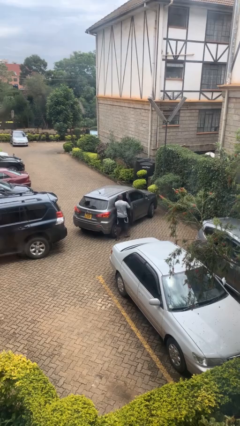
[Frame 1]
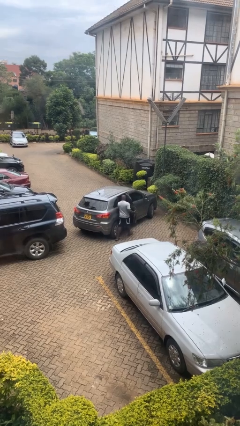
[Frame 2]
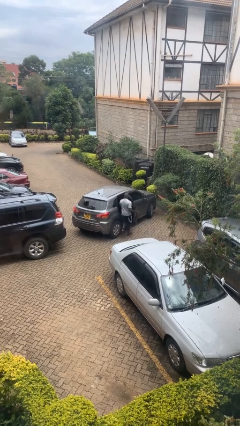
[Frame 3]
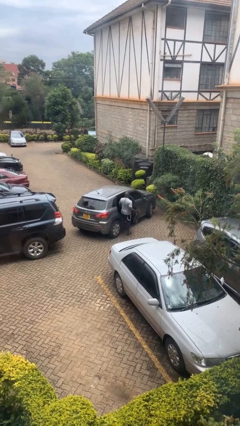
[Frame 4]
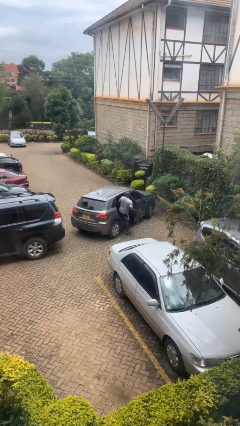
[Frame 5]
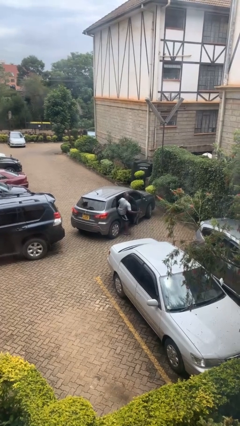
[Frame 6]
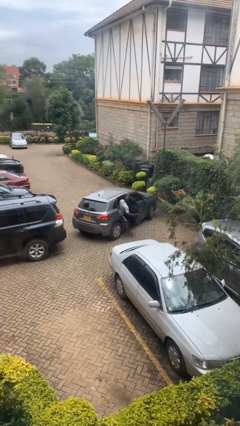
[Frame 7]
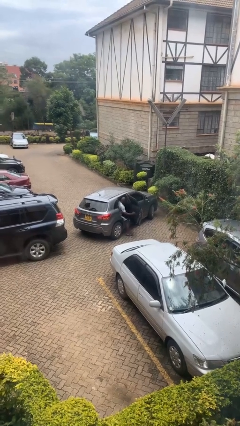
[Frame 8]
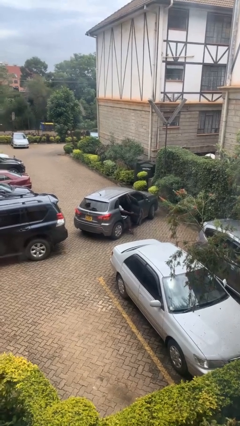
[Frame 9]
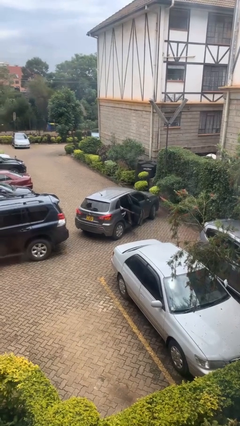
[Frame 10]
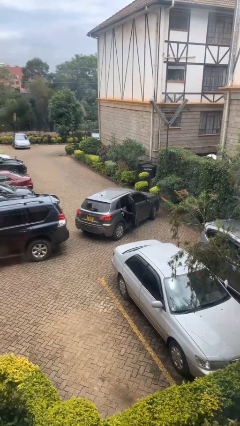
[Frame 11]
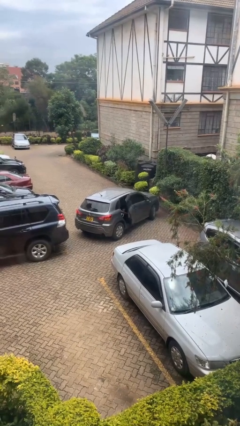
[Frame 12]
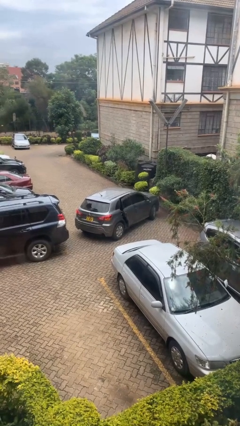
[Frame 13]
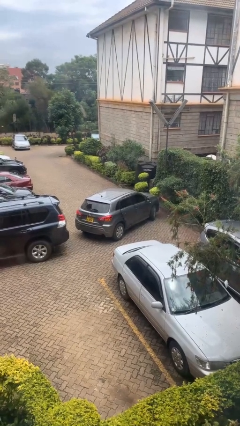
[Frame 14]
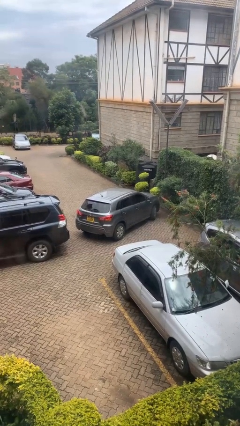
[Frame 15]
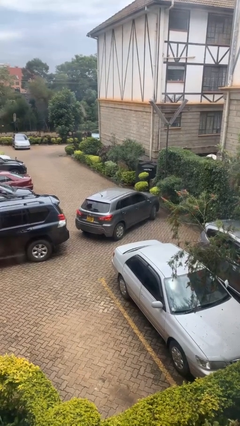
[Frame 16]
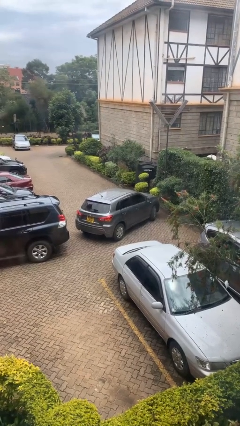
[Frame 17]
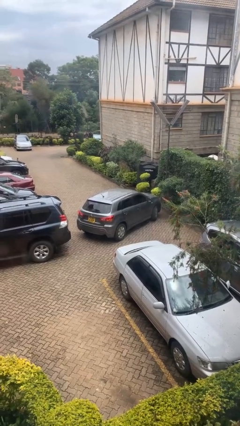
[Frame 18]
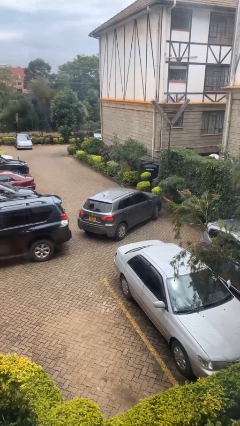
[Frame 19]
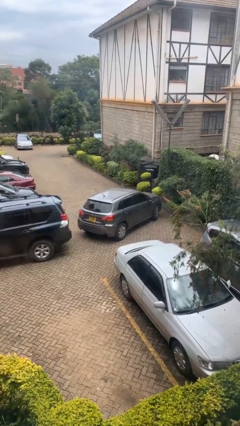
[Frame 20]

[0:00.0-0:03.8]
car picks up person

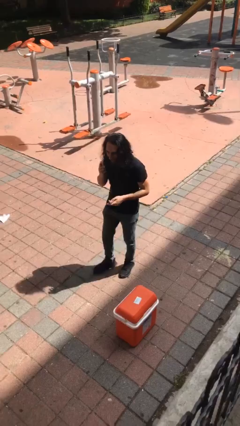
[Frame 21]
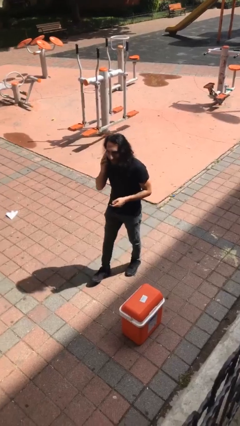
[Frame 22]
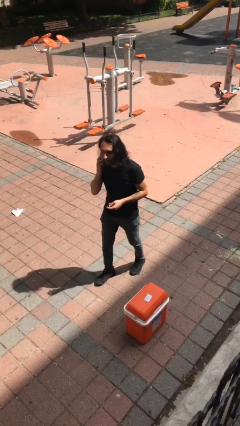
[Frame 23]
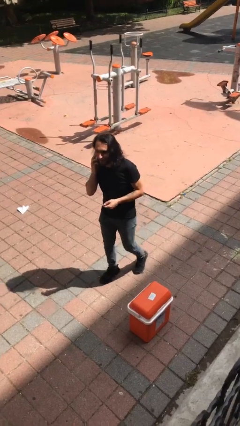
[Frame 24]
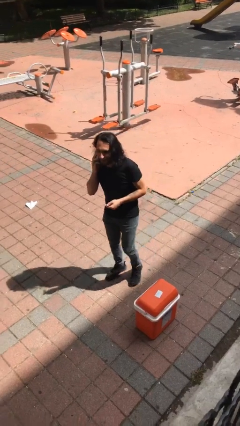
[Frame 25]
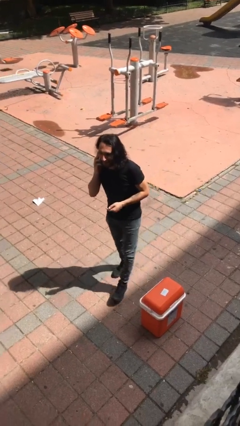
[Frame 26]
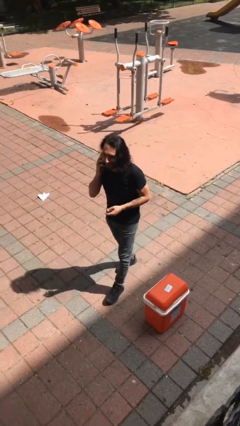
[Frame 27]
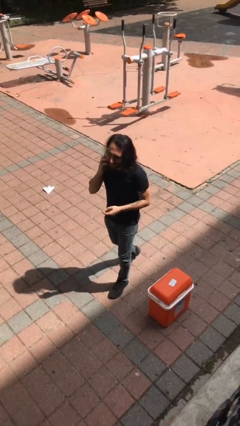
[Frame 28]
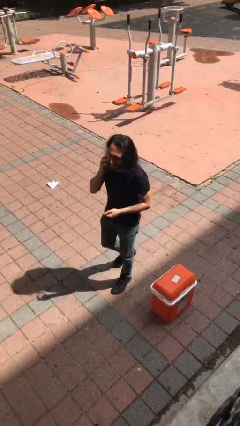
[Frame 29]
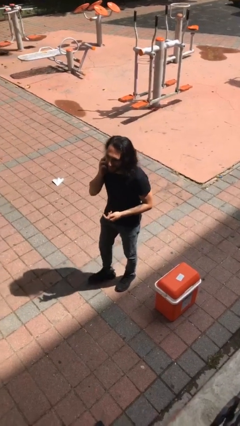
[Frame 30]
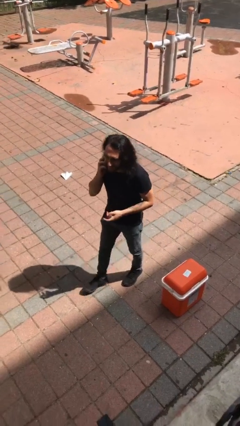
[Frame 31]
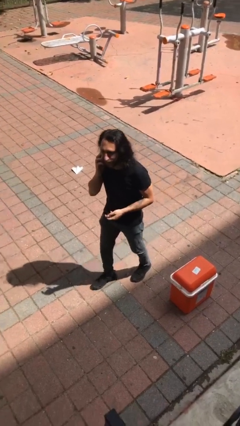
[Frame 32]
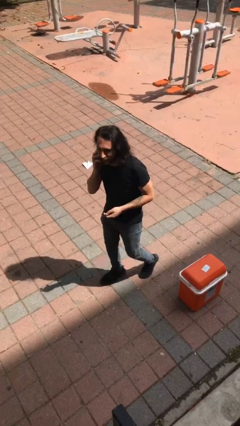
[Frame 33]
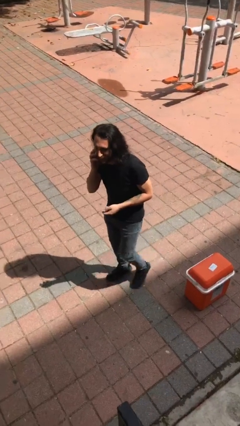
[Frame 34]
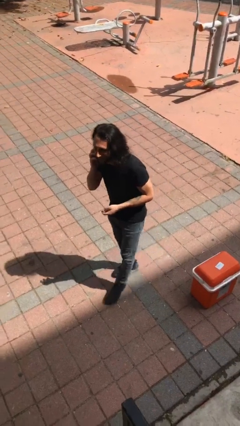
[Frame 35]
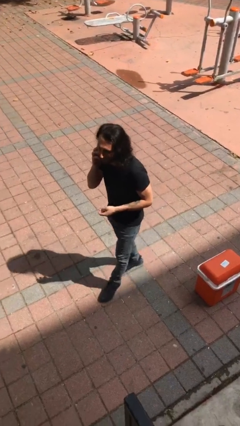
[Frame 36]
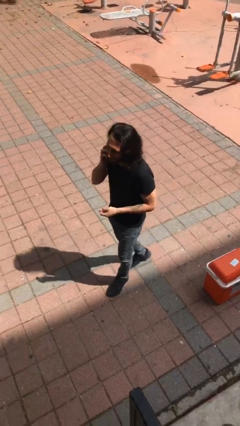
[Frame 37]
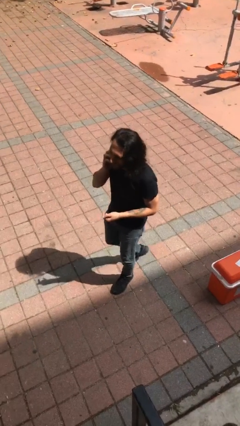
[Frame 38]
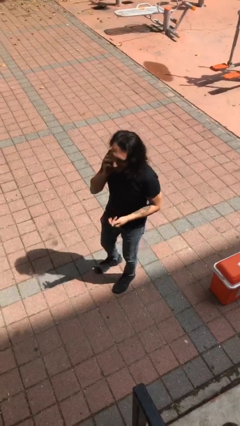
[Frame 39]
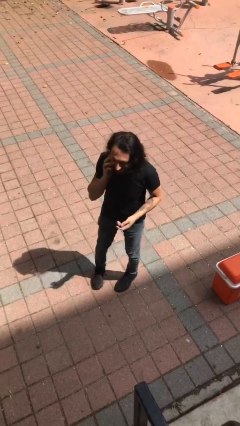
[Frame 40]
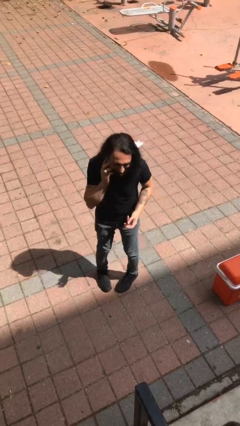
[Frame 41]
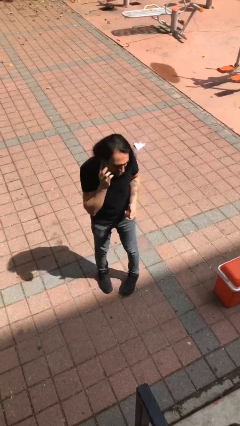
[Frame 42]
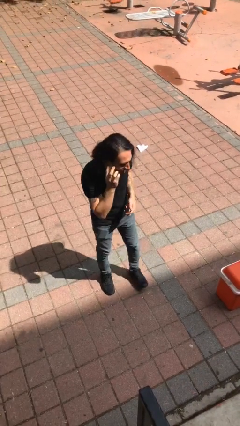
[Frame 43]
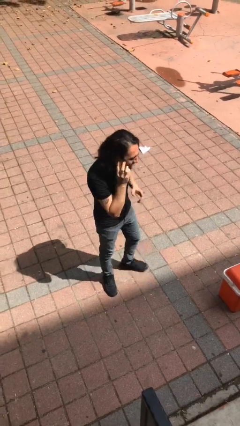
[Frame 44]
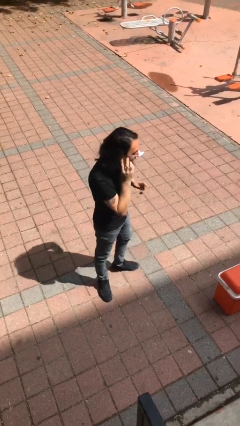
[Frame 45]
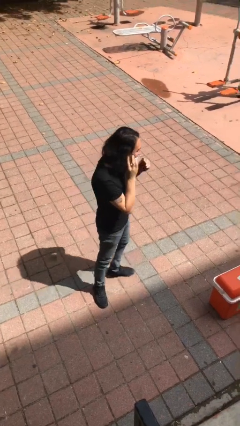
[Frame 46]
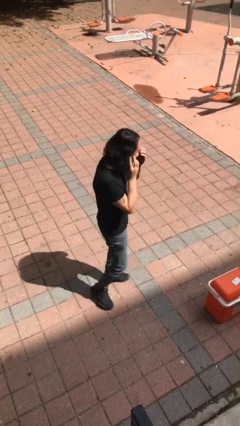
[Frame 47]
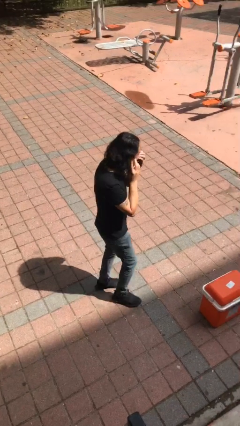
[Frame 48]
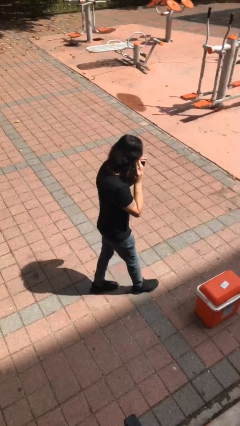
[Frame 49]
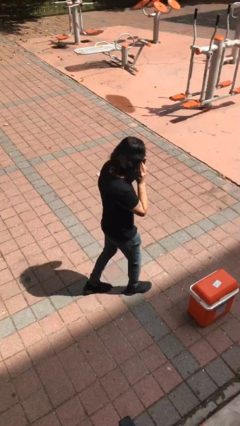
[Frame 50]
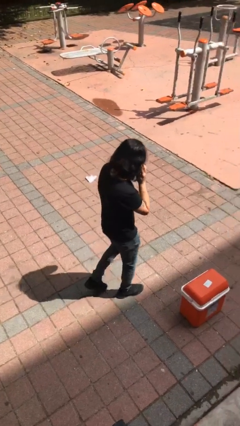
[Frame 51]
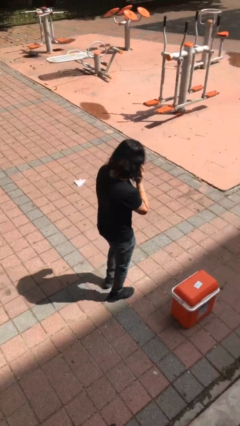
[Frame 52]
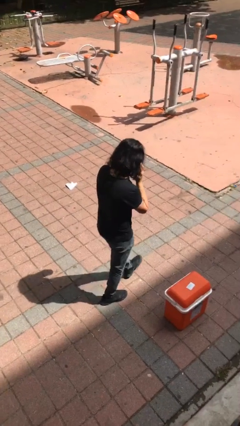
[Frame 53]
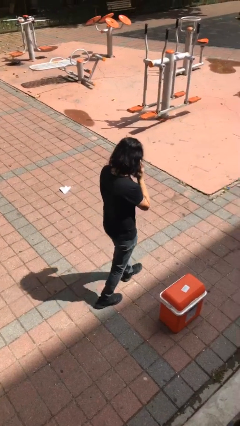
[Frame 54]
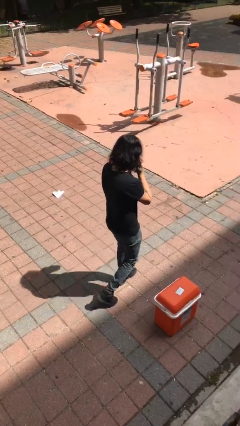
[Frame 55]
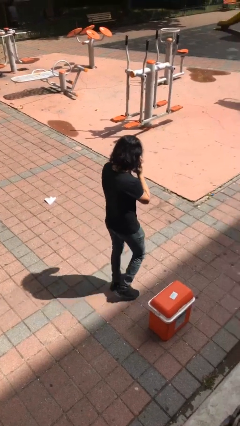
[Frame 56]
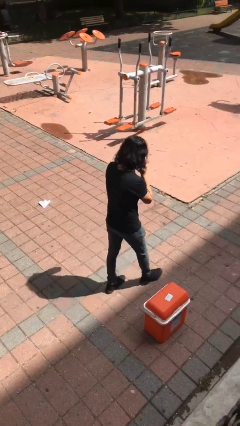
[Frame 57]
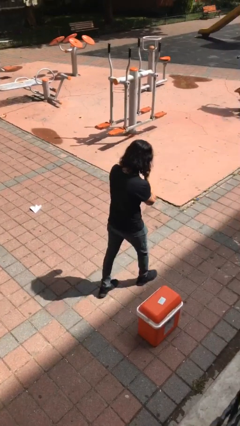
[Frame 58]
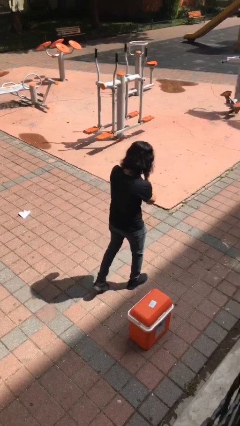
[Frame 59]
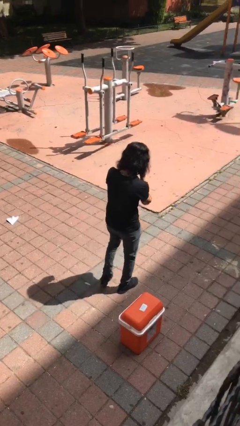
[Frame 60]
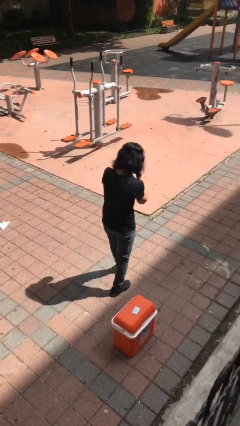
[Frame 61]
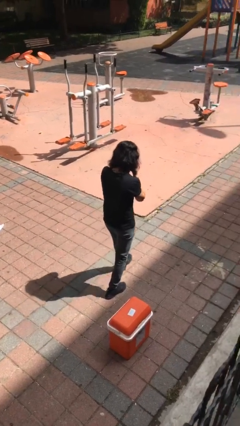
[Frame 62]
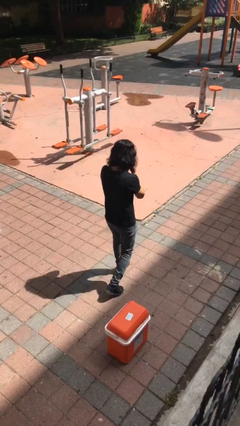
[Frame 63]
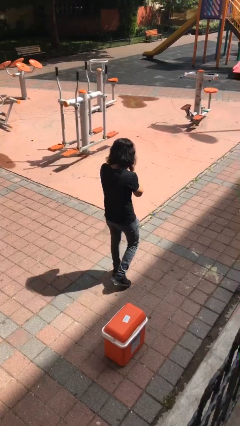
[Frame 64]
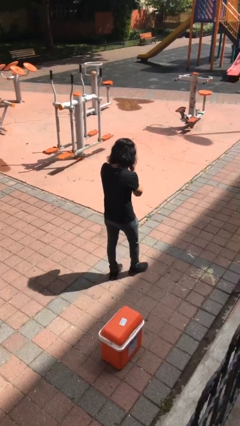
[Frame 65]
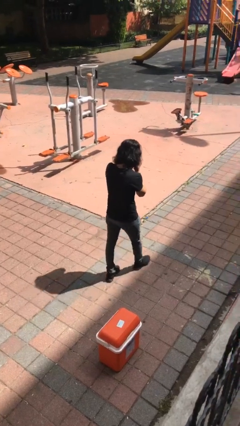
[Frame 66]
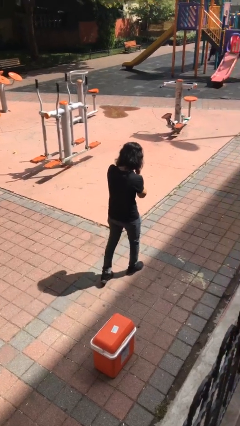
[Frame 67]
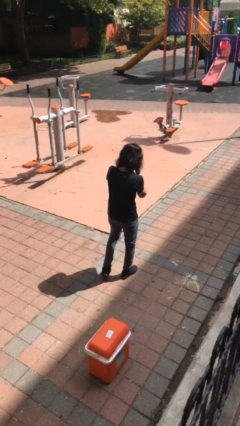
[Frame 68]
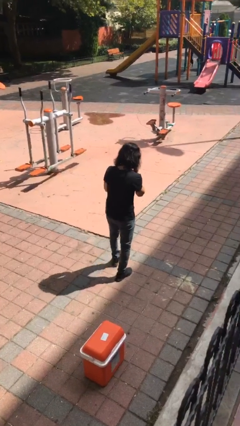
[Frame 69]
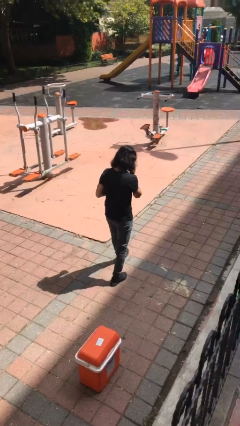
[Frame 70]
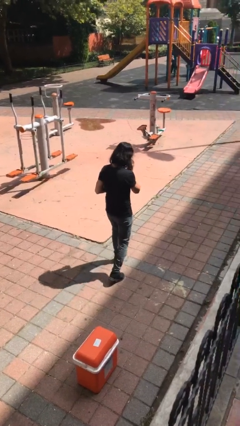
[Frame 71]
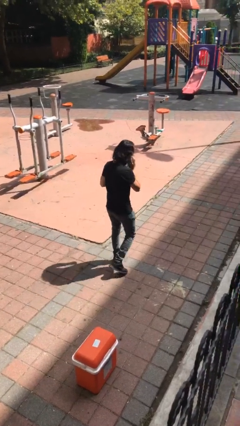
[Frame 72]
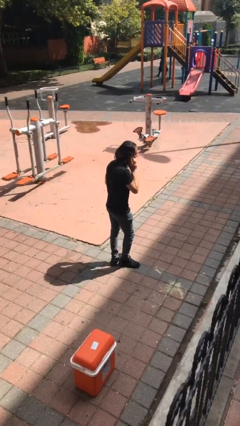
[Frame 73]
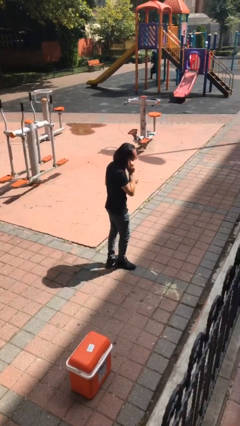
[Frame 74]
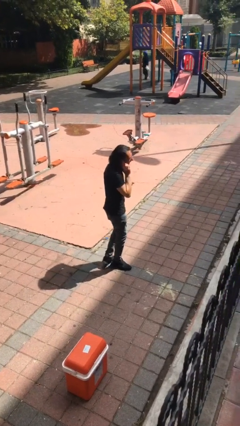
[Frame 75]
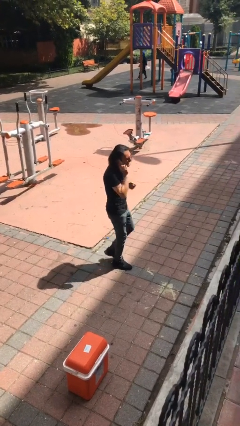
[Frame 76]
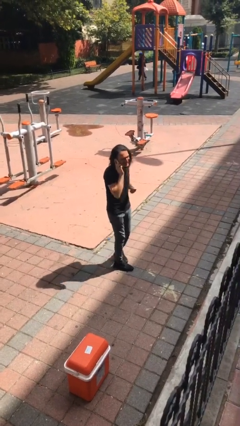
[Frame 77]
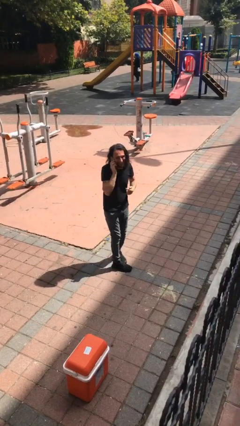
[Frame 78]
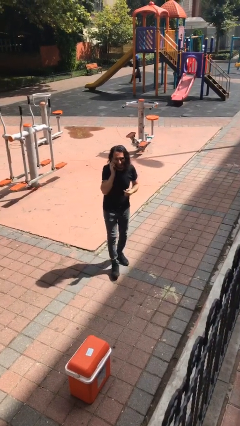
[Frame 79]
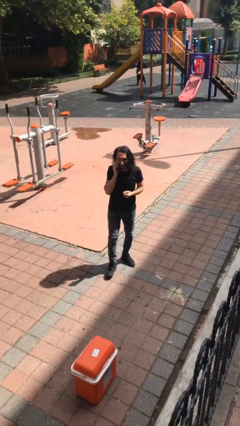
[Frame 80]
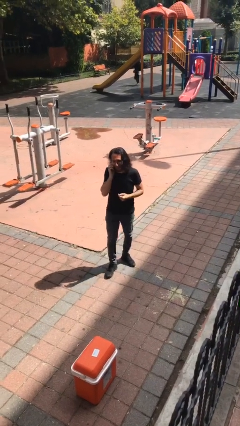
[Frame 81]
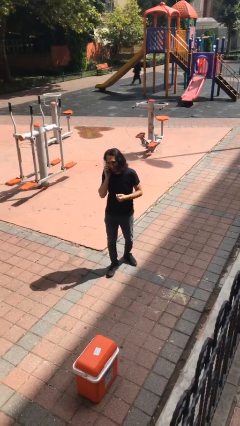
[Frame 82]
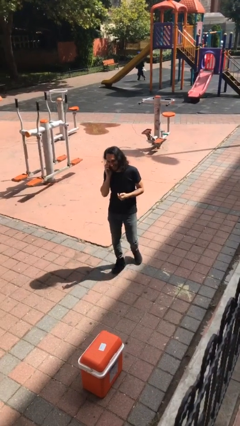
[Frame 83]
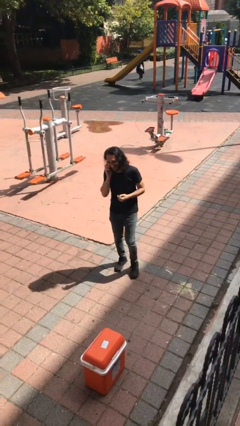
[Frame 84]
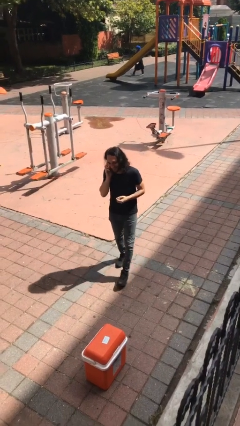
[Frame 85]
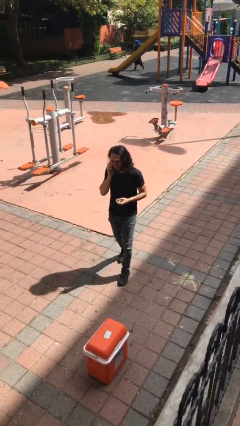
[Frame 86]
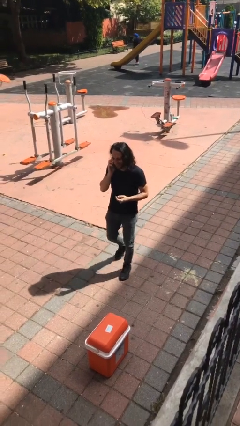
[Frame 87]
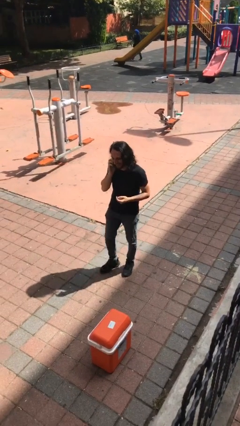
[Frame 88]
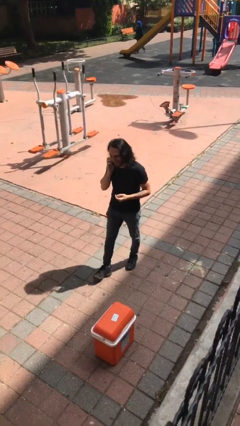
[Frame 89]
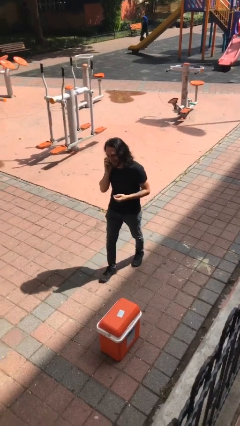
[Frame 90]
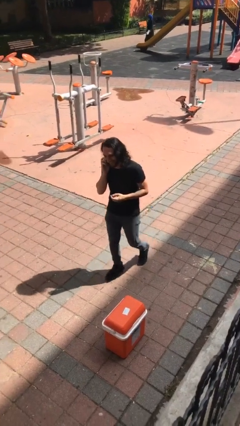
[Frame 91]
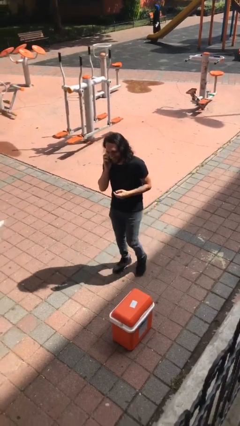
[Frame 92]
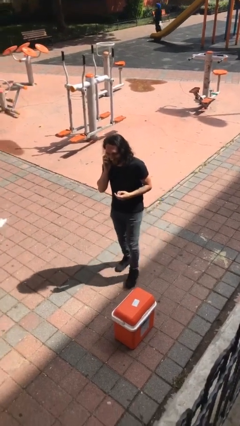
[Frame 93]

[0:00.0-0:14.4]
person talks on phone

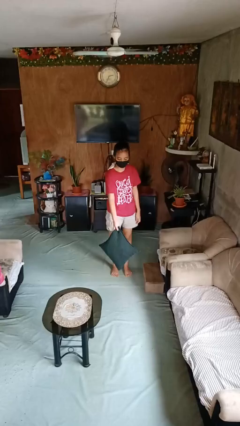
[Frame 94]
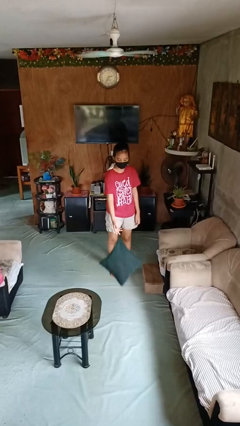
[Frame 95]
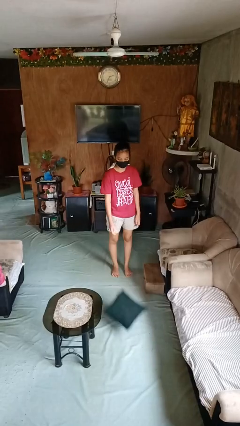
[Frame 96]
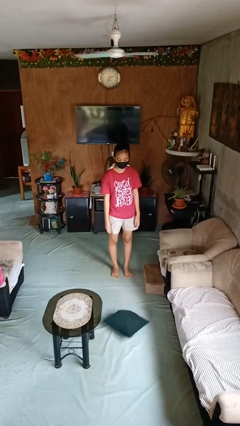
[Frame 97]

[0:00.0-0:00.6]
person throws object to ground
